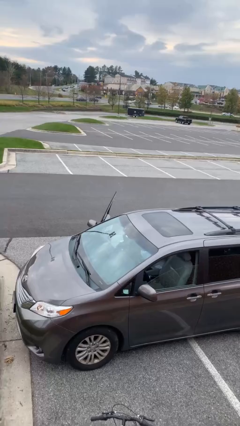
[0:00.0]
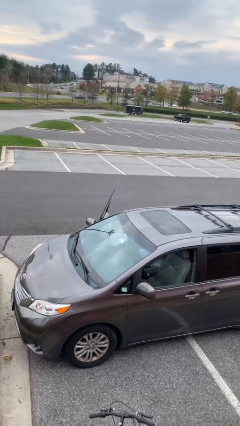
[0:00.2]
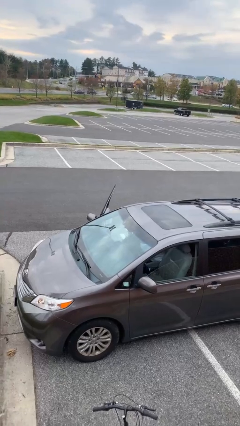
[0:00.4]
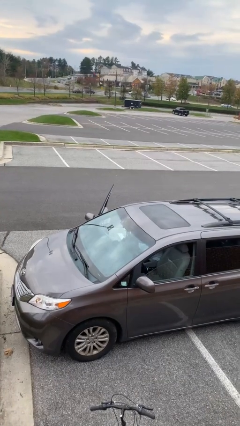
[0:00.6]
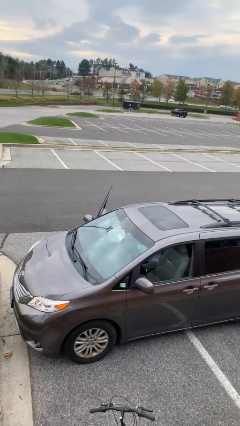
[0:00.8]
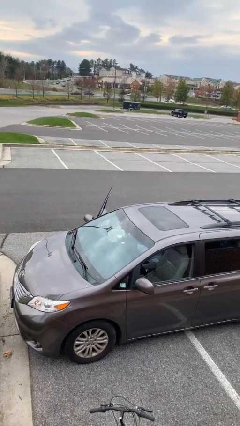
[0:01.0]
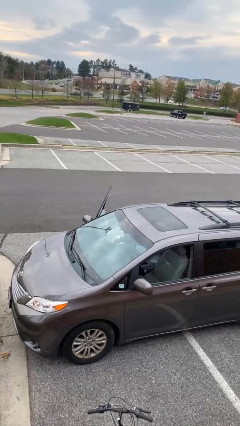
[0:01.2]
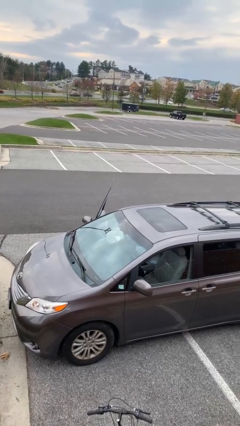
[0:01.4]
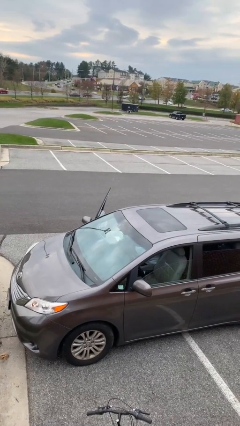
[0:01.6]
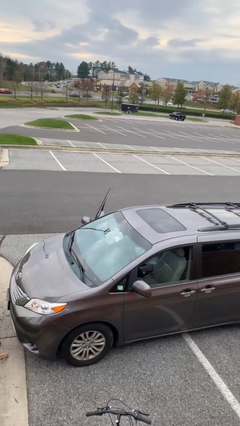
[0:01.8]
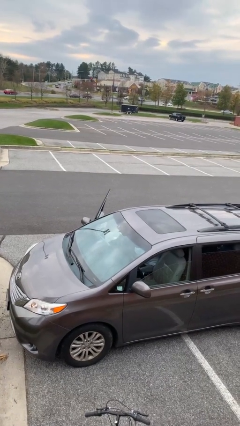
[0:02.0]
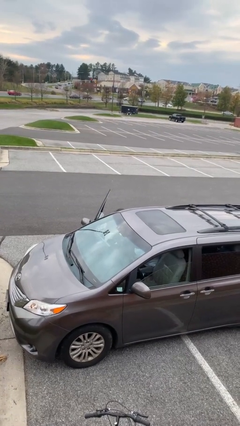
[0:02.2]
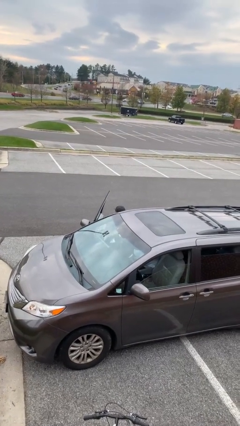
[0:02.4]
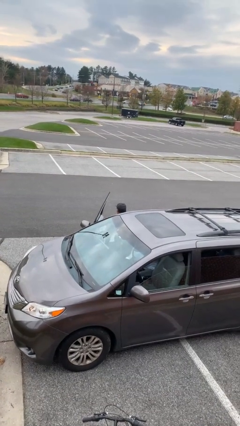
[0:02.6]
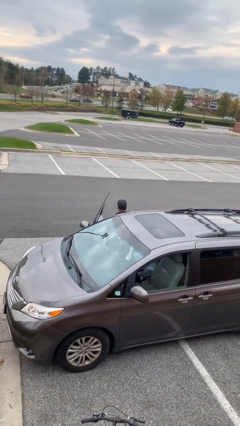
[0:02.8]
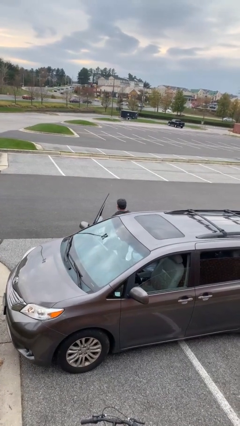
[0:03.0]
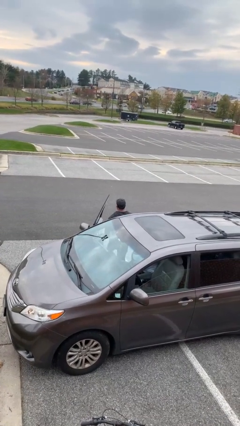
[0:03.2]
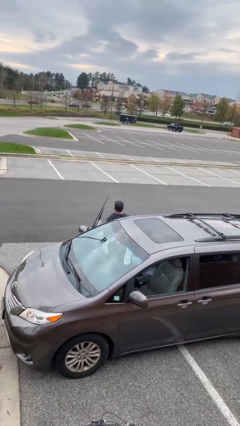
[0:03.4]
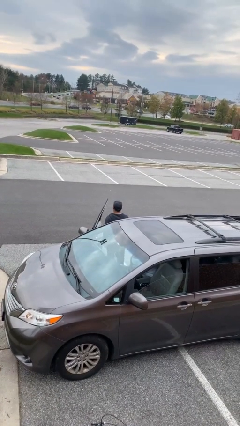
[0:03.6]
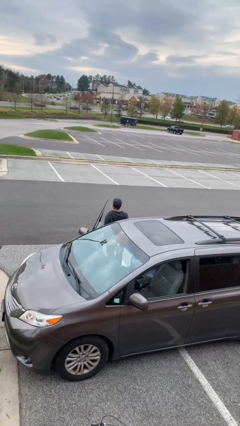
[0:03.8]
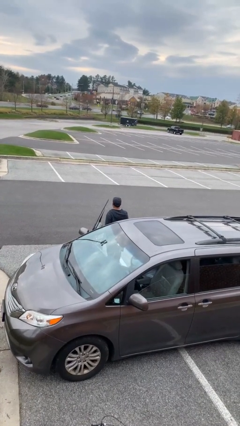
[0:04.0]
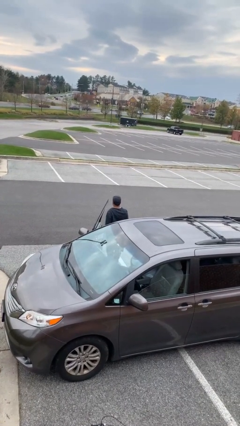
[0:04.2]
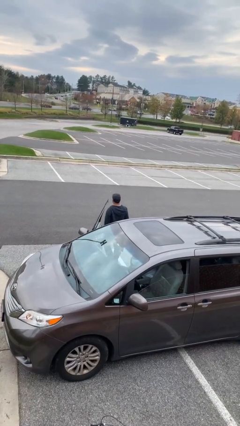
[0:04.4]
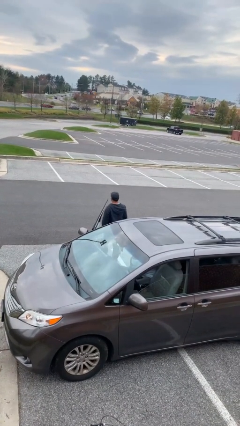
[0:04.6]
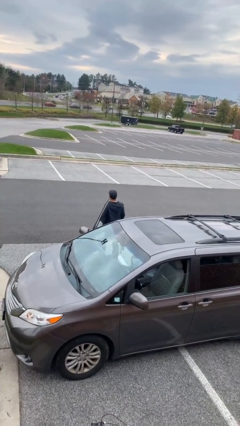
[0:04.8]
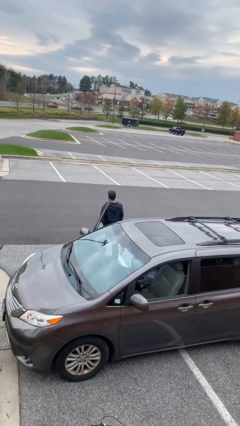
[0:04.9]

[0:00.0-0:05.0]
person exits car

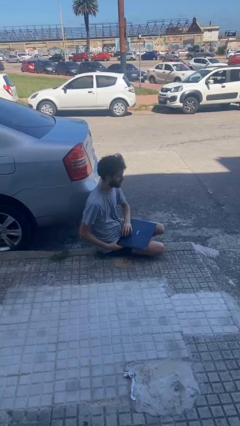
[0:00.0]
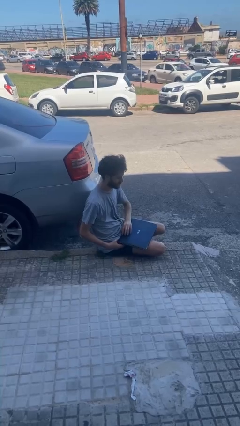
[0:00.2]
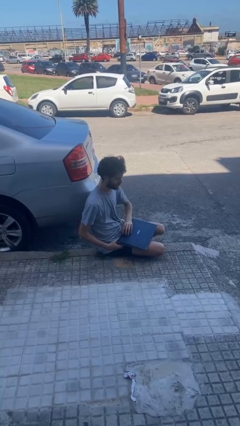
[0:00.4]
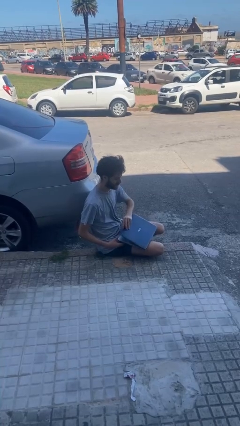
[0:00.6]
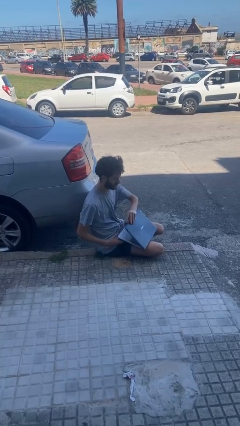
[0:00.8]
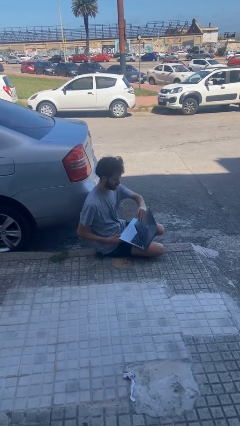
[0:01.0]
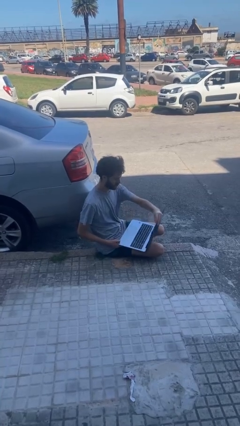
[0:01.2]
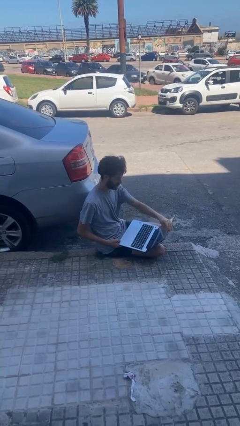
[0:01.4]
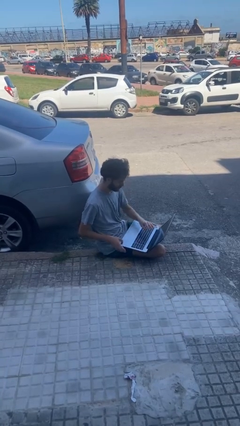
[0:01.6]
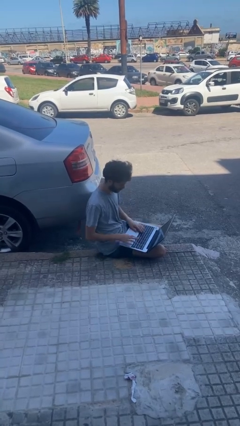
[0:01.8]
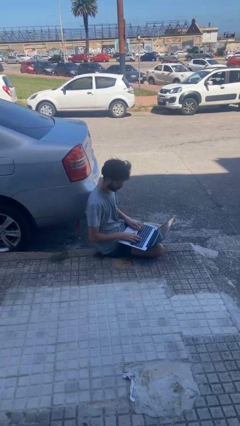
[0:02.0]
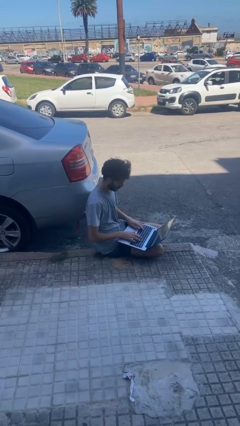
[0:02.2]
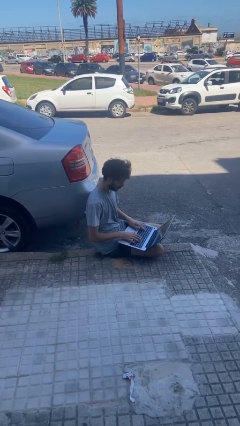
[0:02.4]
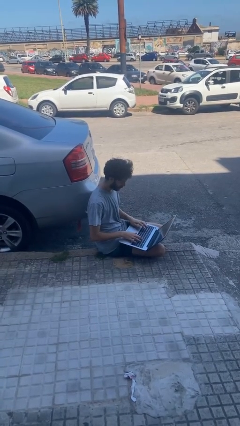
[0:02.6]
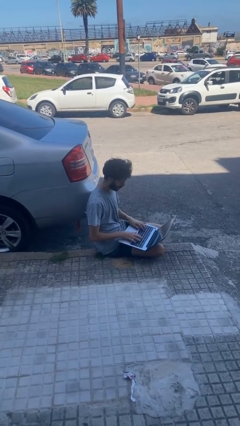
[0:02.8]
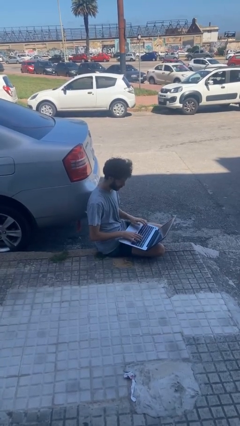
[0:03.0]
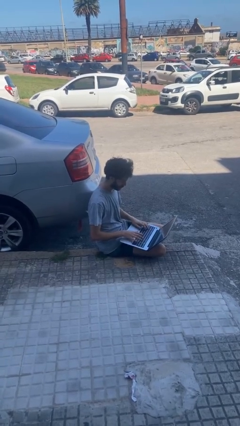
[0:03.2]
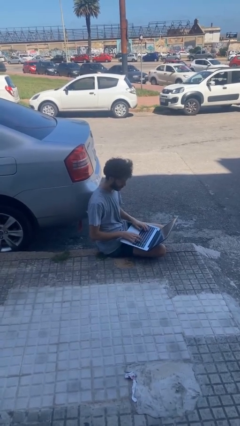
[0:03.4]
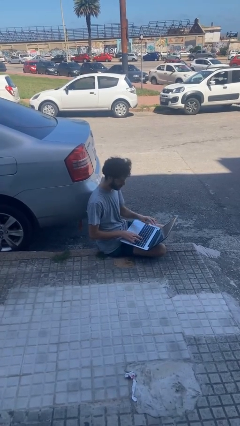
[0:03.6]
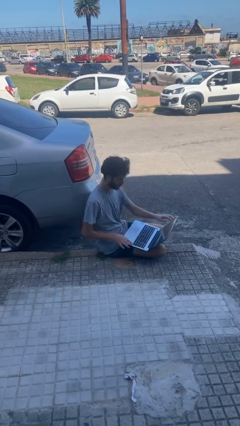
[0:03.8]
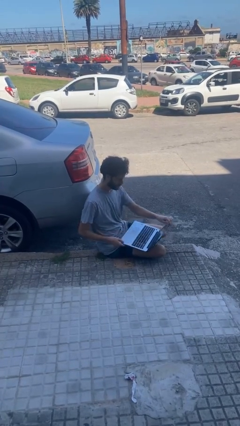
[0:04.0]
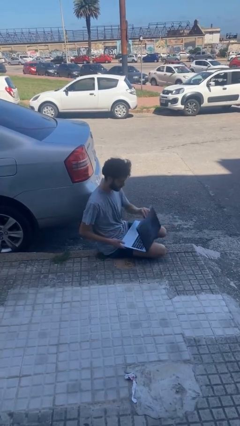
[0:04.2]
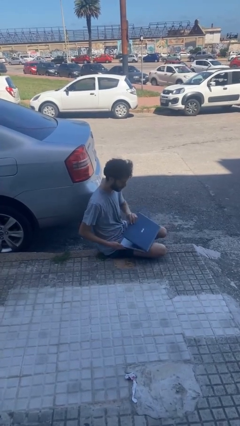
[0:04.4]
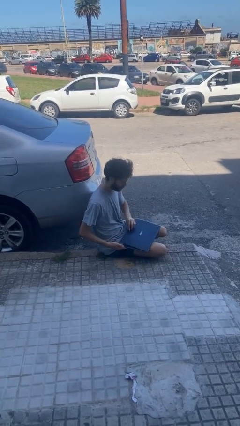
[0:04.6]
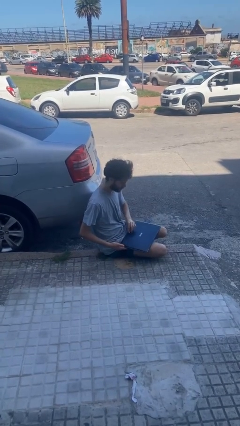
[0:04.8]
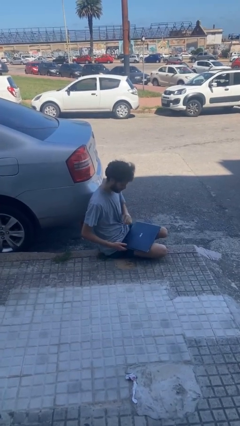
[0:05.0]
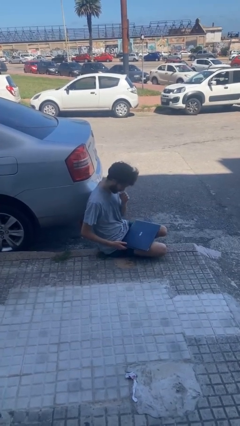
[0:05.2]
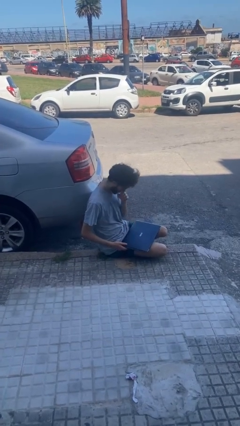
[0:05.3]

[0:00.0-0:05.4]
person interacts with laptop

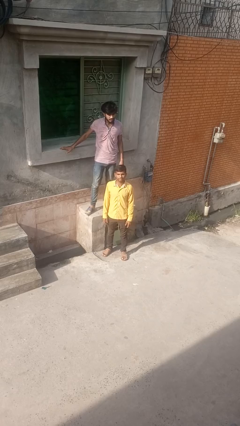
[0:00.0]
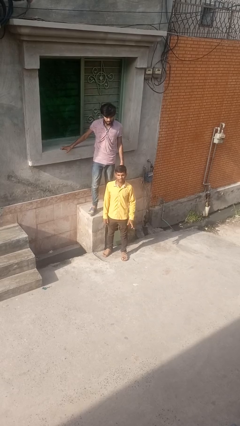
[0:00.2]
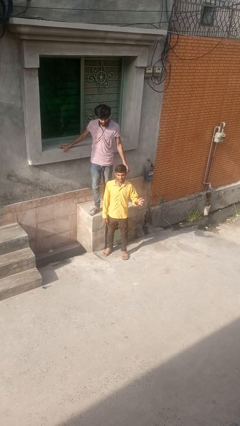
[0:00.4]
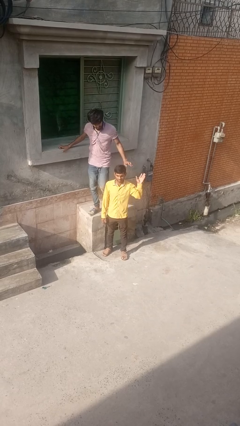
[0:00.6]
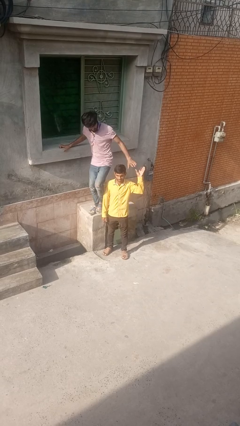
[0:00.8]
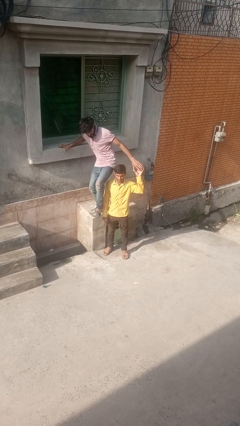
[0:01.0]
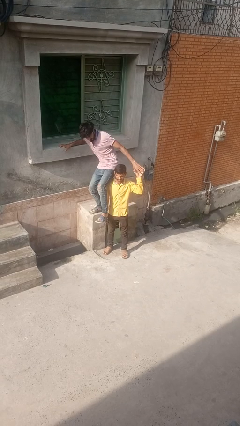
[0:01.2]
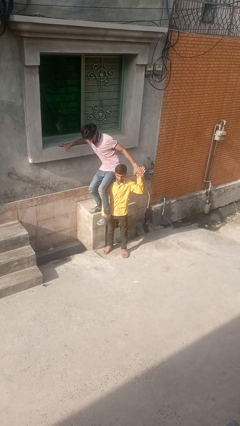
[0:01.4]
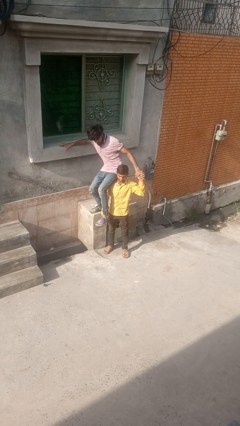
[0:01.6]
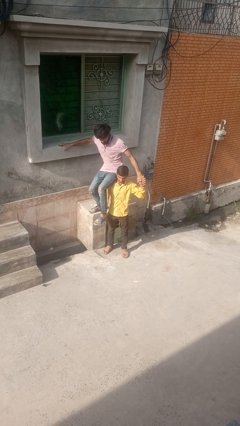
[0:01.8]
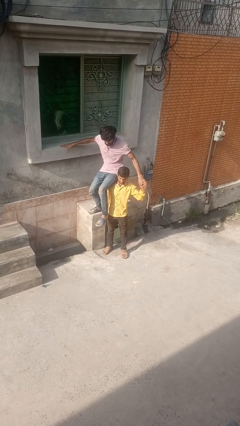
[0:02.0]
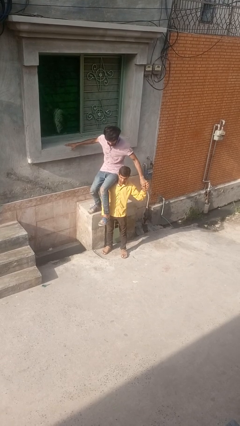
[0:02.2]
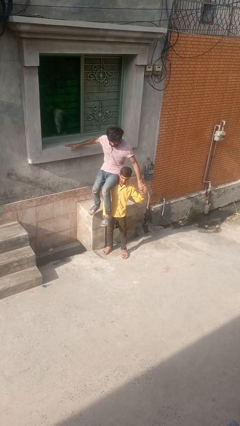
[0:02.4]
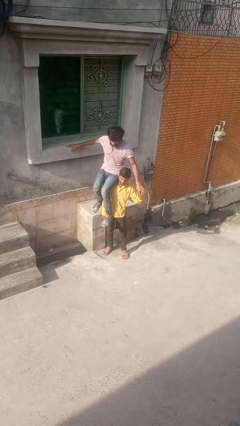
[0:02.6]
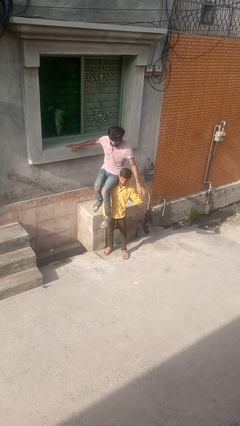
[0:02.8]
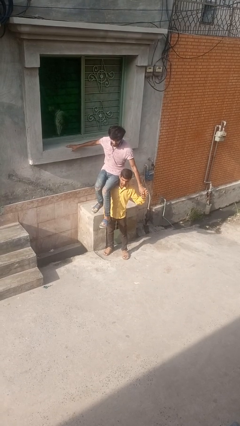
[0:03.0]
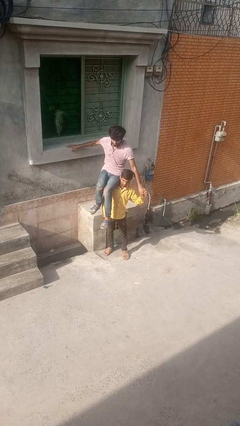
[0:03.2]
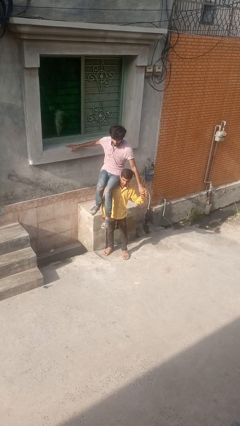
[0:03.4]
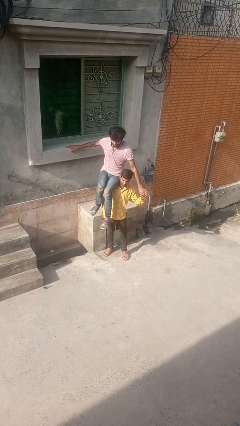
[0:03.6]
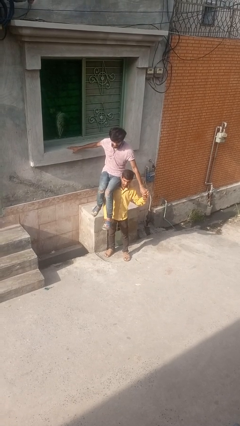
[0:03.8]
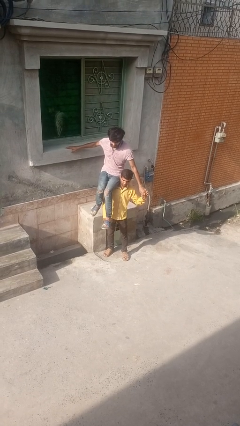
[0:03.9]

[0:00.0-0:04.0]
person carries person over shoulder

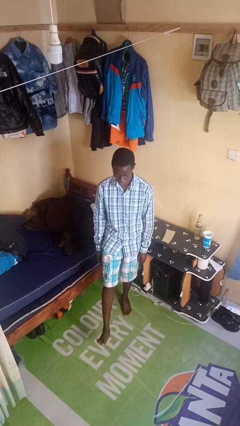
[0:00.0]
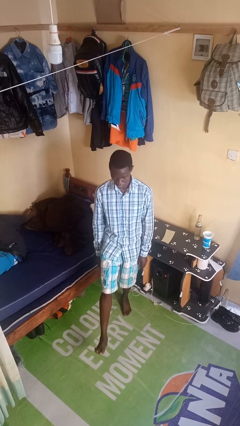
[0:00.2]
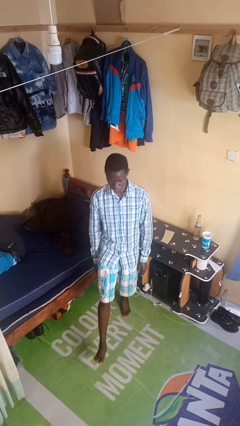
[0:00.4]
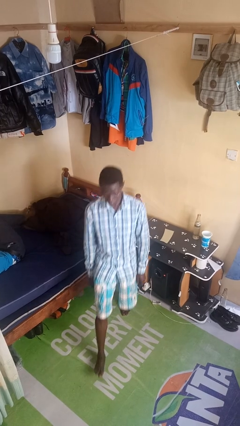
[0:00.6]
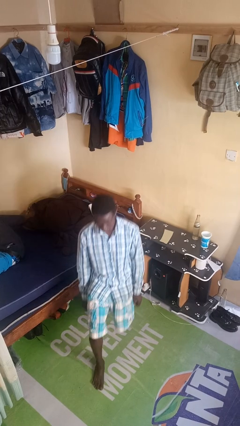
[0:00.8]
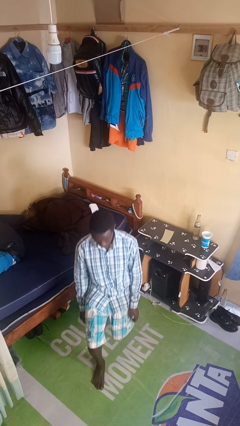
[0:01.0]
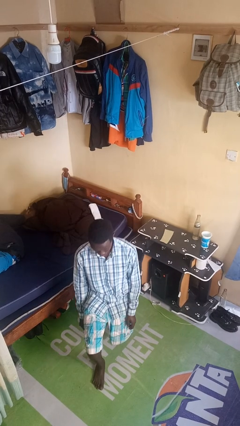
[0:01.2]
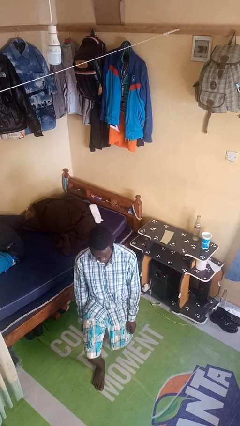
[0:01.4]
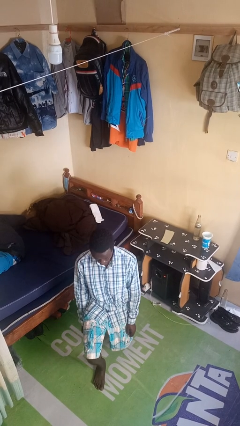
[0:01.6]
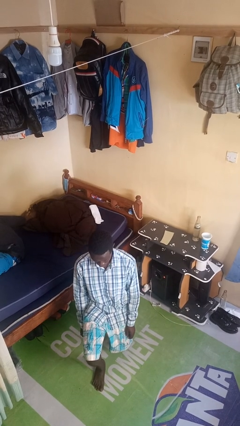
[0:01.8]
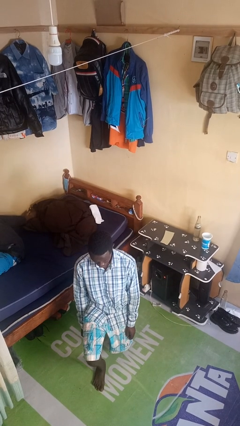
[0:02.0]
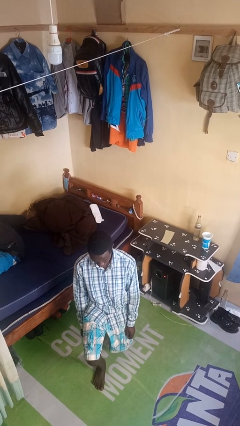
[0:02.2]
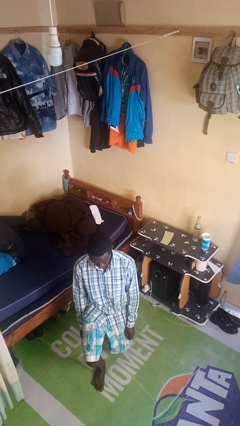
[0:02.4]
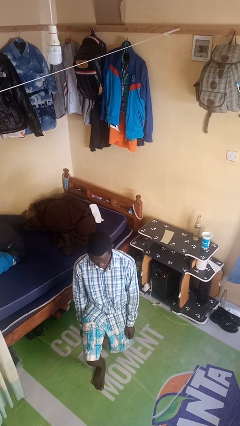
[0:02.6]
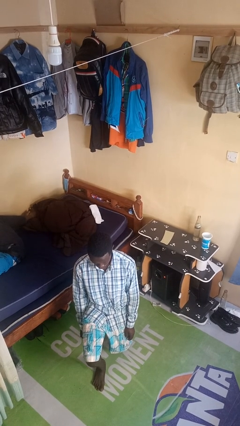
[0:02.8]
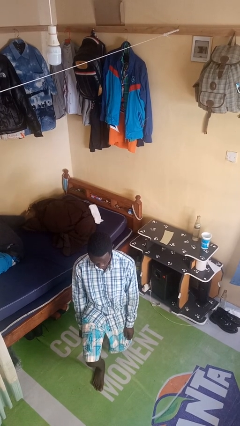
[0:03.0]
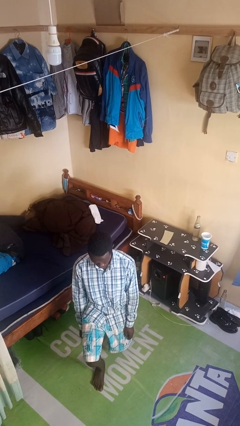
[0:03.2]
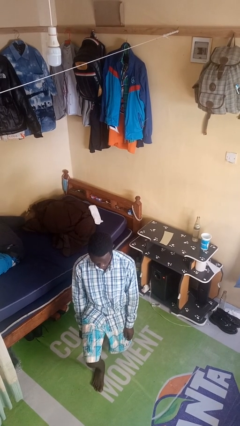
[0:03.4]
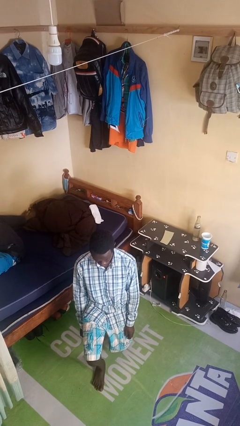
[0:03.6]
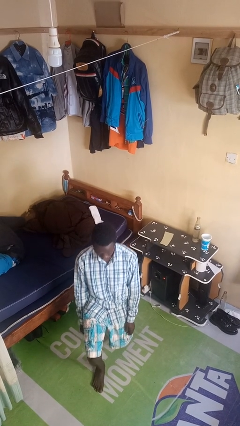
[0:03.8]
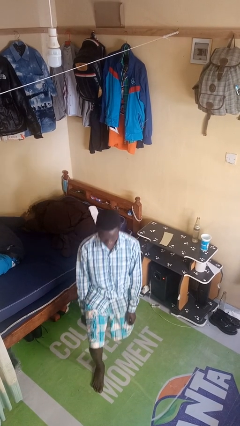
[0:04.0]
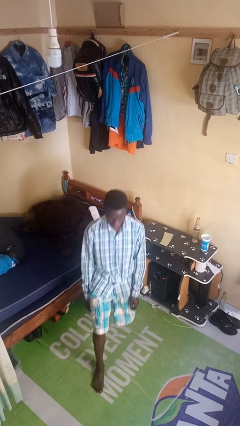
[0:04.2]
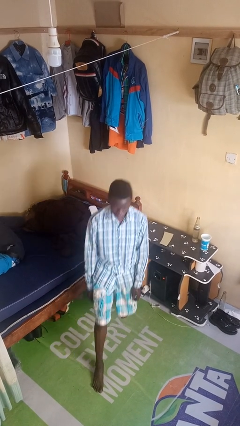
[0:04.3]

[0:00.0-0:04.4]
person exercises with lunges
